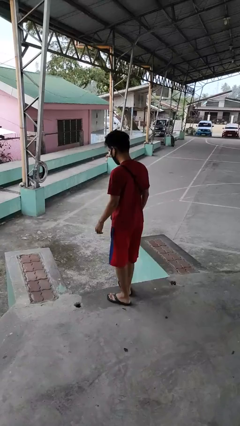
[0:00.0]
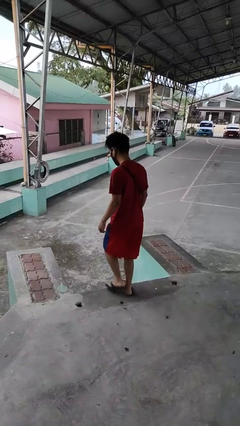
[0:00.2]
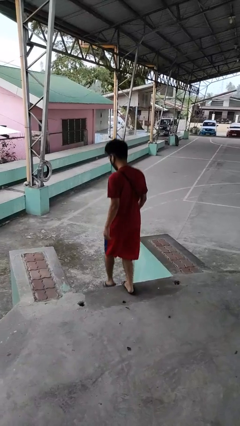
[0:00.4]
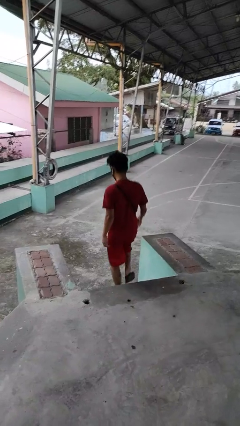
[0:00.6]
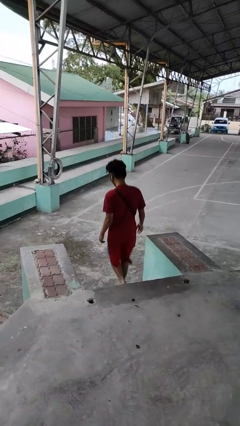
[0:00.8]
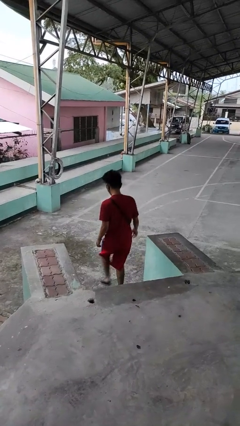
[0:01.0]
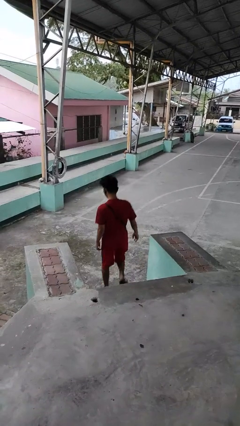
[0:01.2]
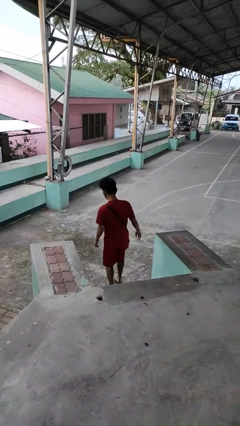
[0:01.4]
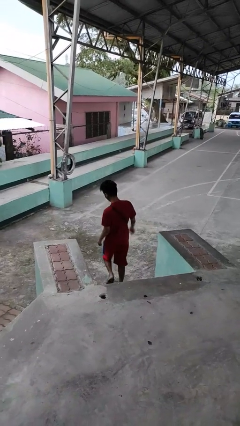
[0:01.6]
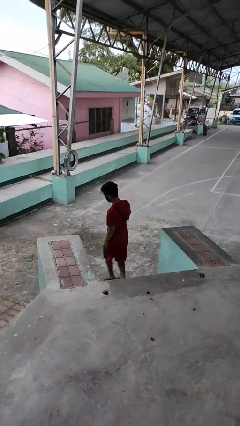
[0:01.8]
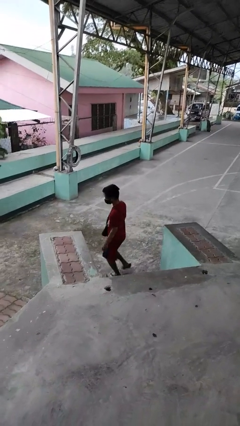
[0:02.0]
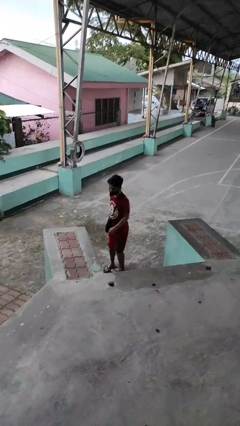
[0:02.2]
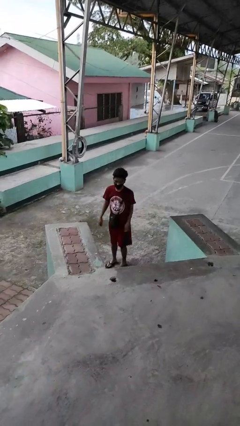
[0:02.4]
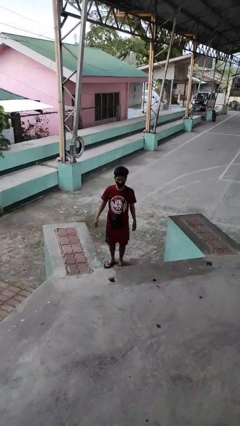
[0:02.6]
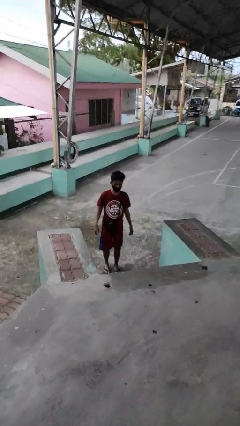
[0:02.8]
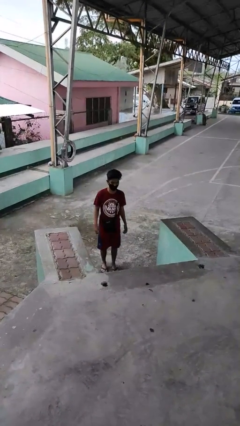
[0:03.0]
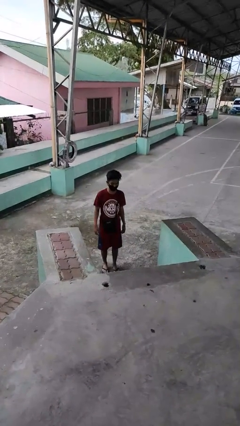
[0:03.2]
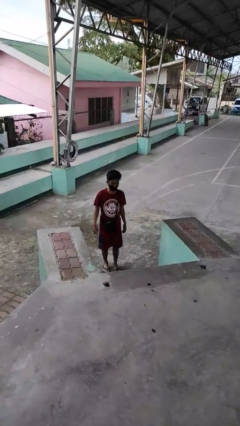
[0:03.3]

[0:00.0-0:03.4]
person climbs down stairs

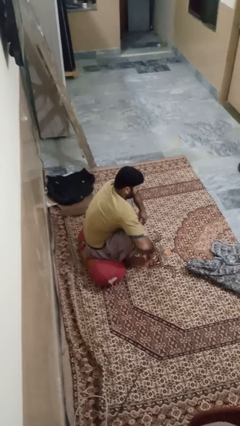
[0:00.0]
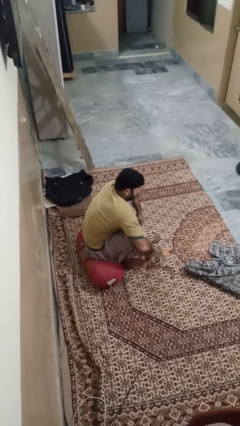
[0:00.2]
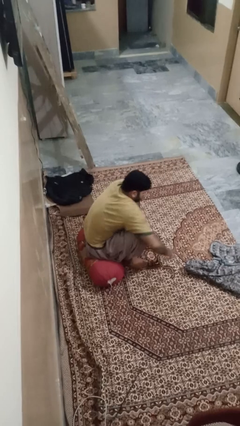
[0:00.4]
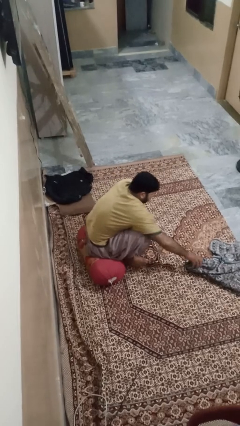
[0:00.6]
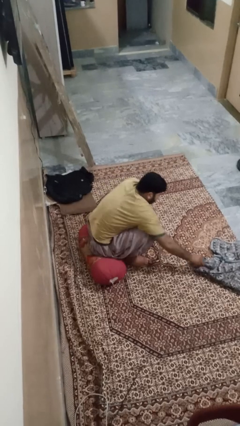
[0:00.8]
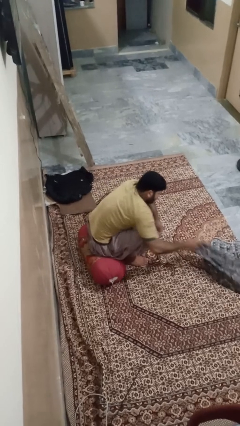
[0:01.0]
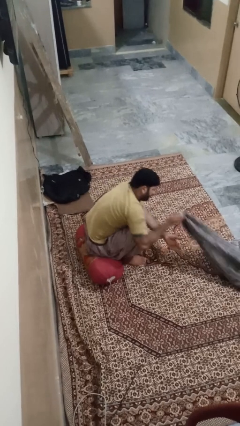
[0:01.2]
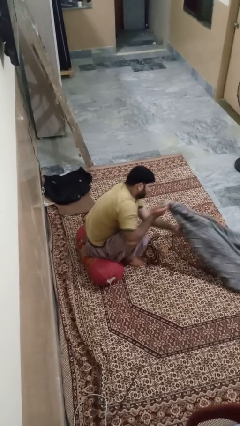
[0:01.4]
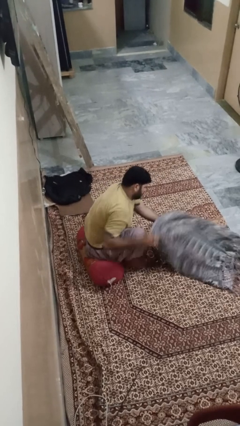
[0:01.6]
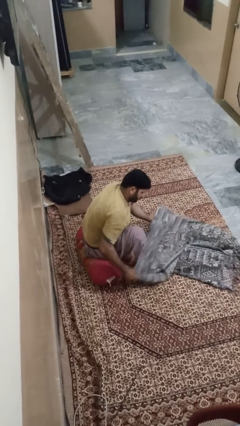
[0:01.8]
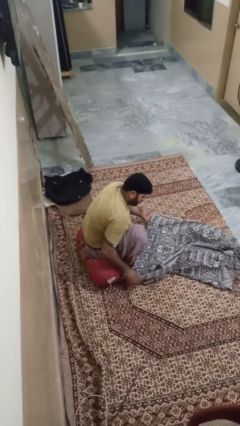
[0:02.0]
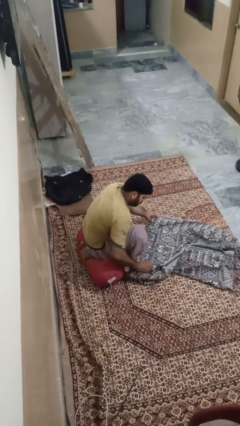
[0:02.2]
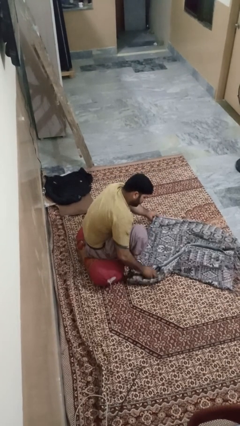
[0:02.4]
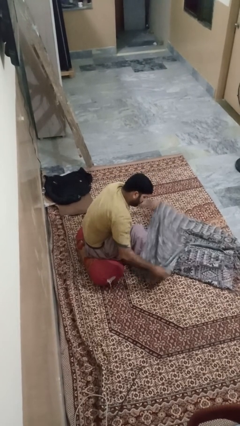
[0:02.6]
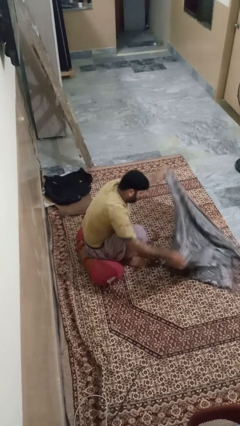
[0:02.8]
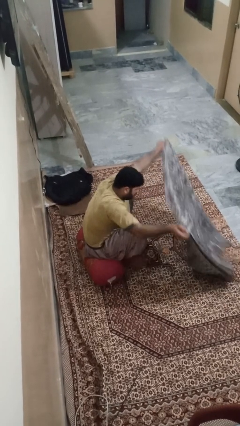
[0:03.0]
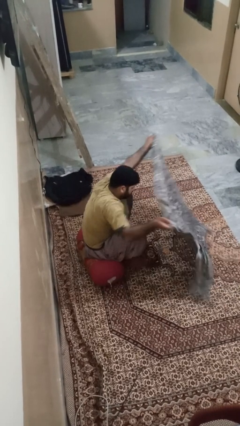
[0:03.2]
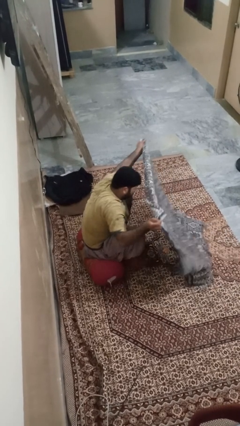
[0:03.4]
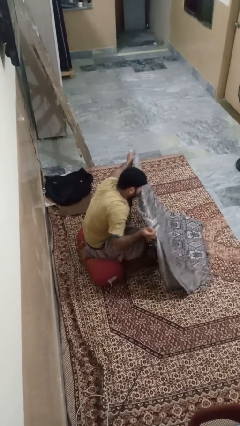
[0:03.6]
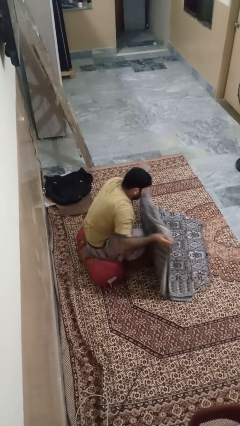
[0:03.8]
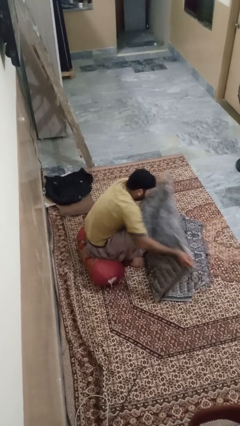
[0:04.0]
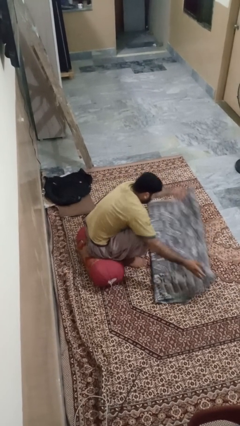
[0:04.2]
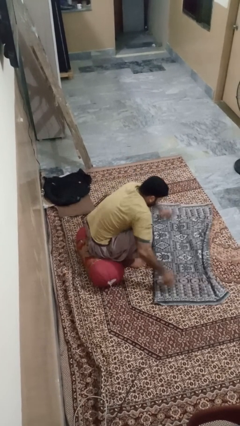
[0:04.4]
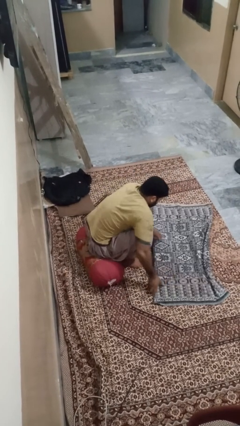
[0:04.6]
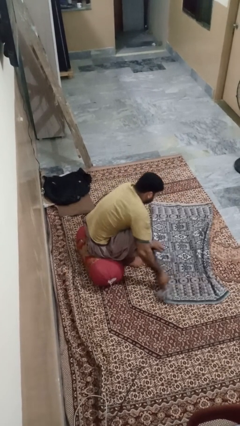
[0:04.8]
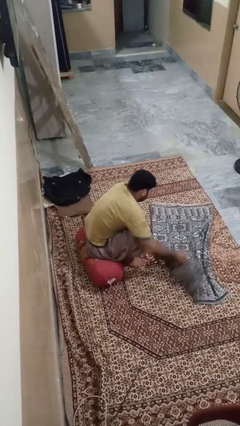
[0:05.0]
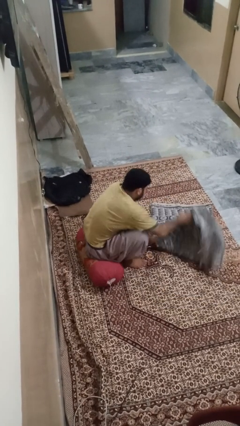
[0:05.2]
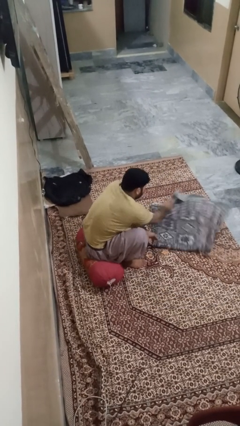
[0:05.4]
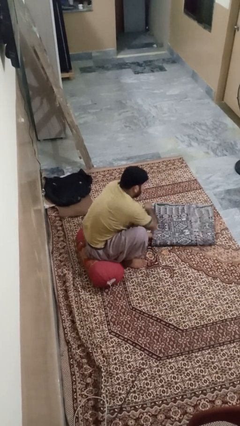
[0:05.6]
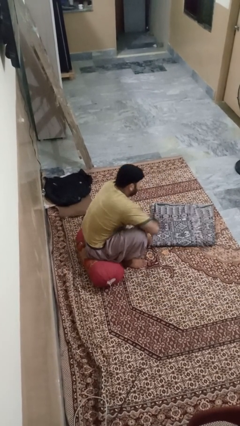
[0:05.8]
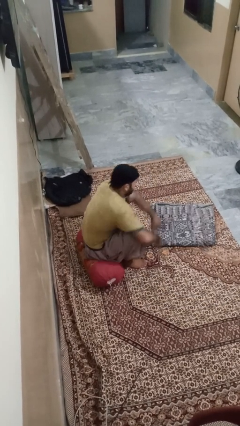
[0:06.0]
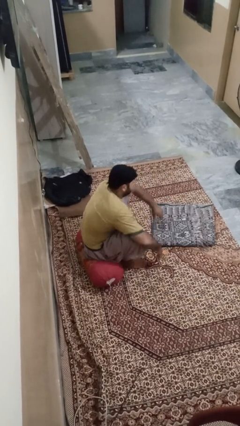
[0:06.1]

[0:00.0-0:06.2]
person folds blanket

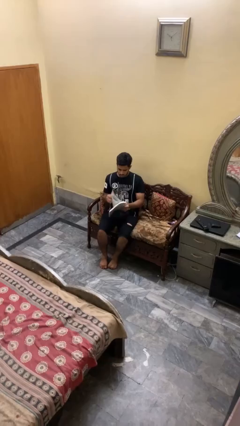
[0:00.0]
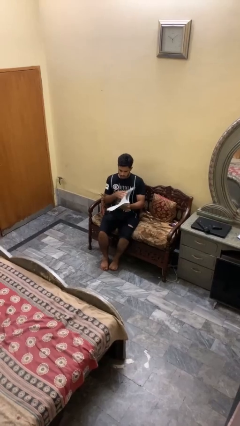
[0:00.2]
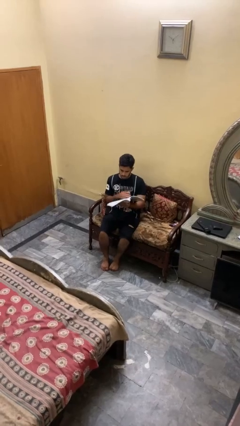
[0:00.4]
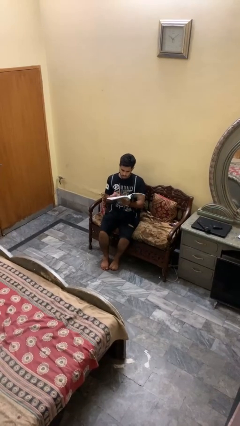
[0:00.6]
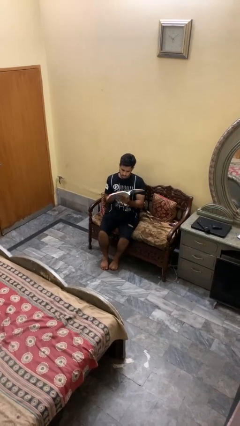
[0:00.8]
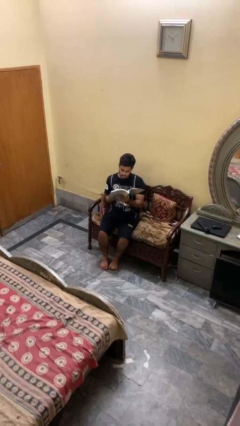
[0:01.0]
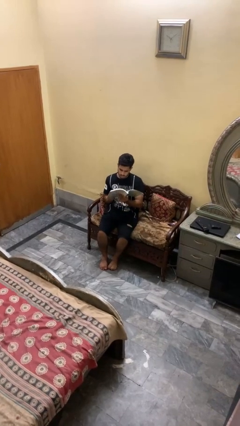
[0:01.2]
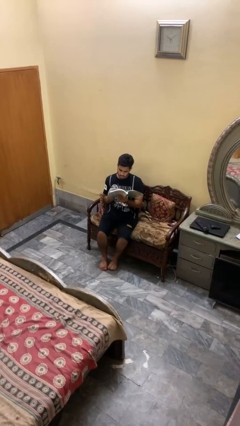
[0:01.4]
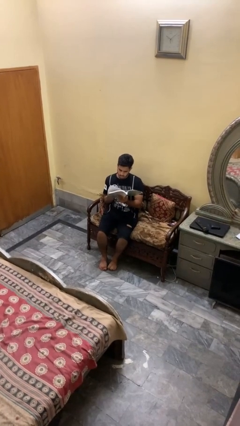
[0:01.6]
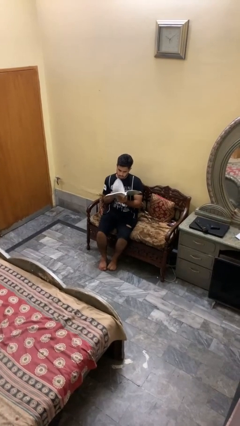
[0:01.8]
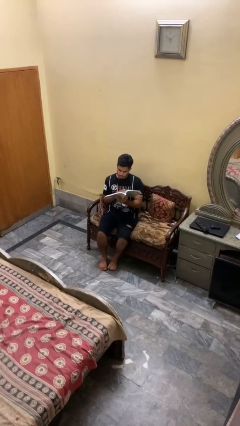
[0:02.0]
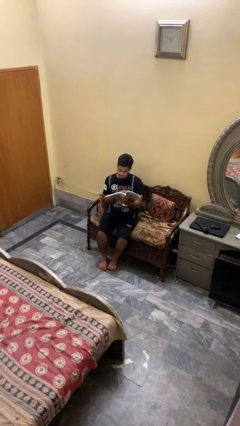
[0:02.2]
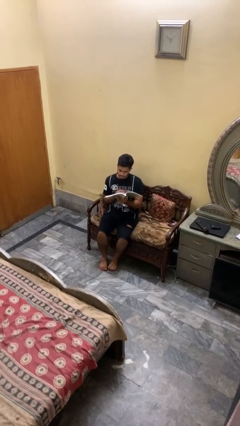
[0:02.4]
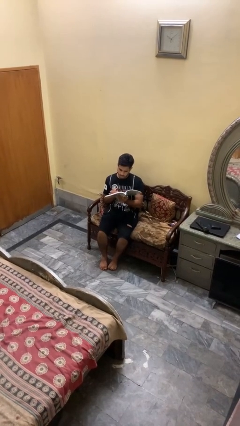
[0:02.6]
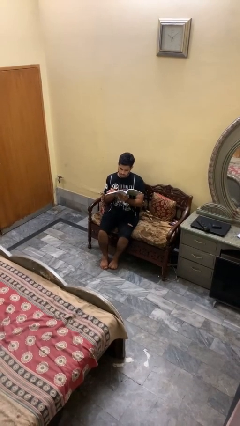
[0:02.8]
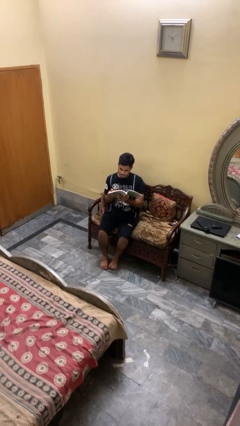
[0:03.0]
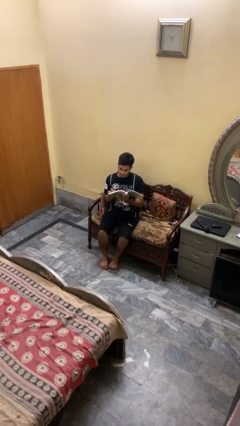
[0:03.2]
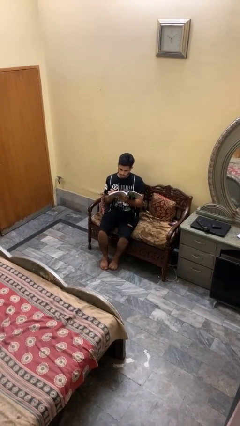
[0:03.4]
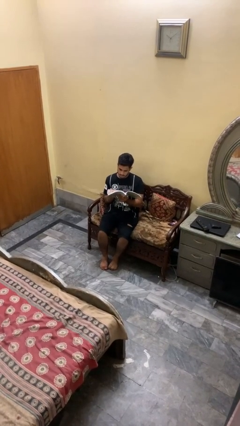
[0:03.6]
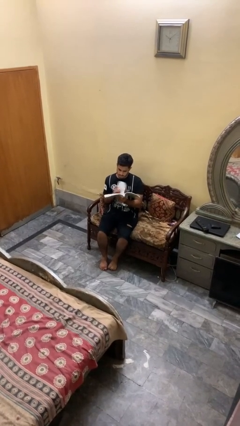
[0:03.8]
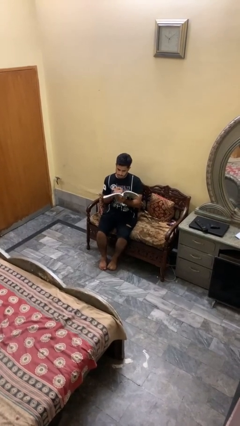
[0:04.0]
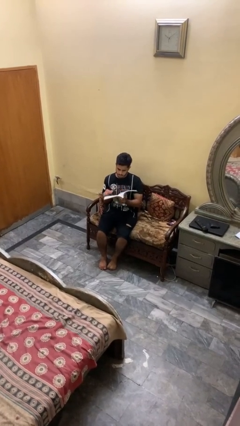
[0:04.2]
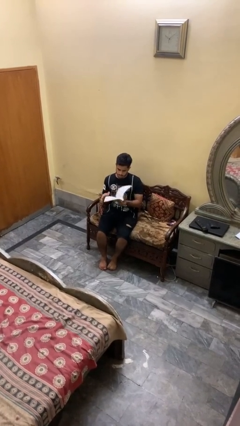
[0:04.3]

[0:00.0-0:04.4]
person reads book

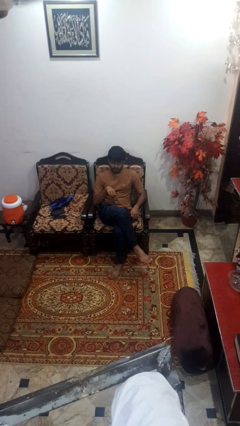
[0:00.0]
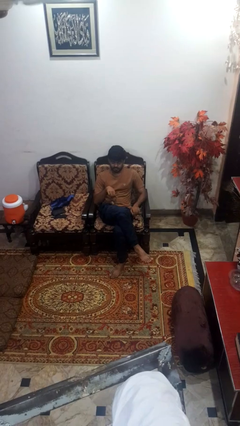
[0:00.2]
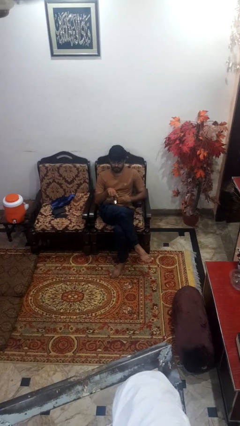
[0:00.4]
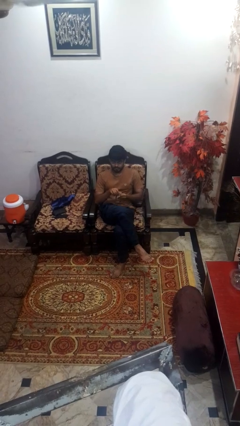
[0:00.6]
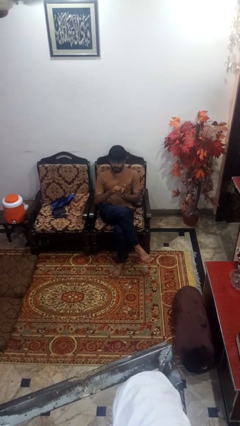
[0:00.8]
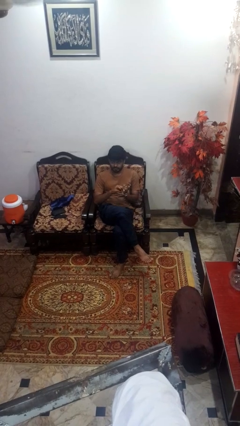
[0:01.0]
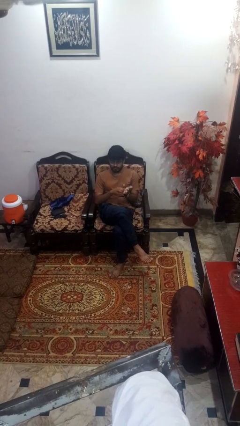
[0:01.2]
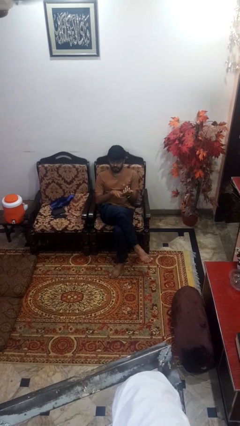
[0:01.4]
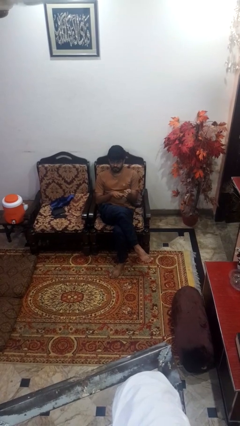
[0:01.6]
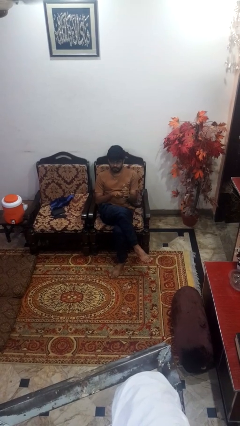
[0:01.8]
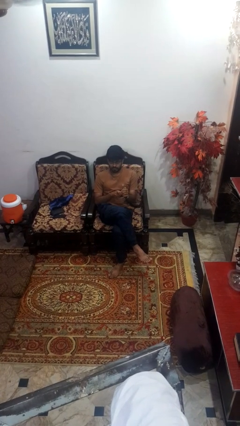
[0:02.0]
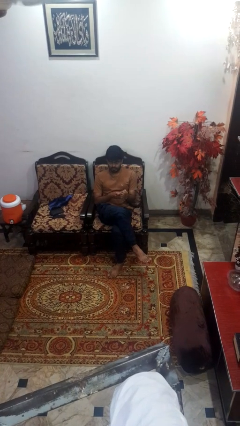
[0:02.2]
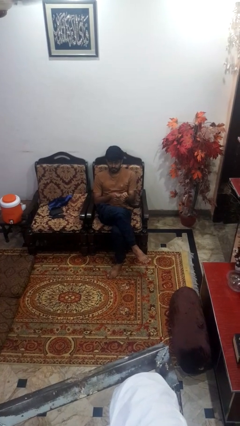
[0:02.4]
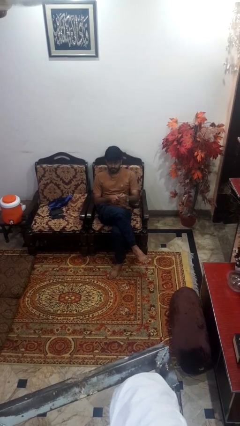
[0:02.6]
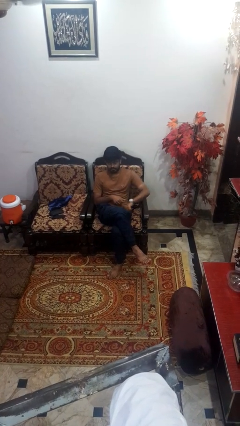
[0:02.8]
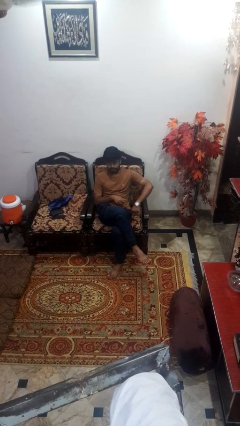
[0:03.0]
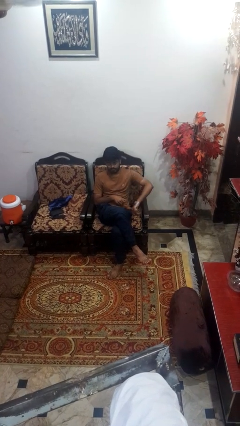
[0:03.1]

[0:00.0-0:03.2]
person puts on wristwatch
